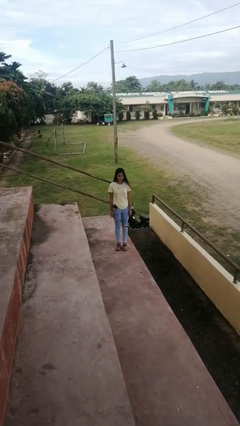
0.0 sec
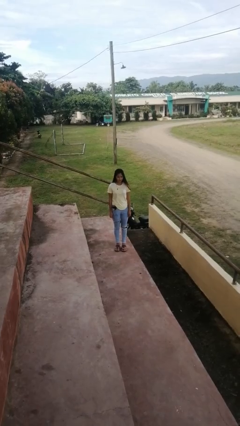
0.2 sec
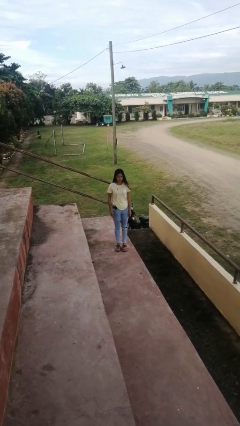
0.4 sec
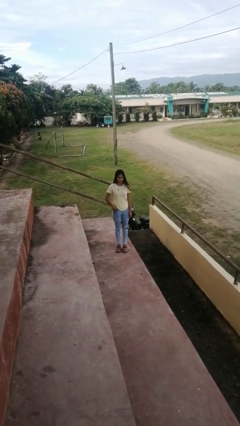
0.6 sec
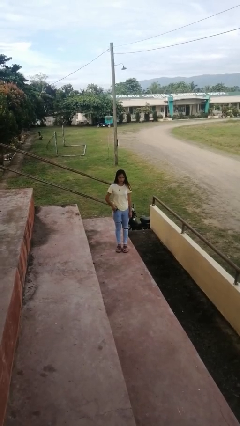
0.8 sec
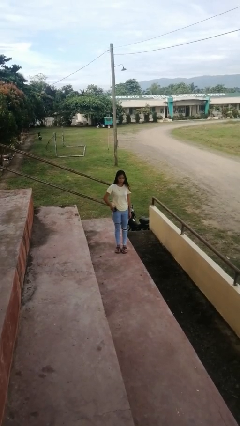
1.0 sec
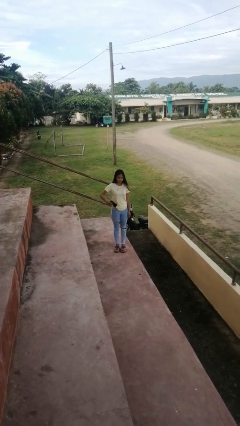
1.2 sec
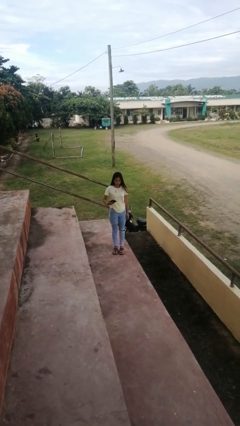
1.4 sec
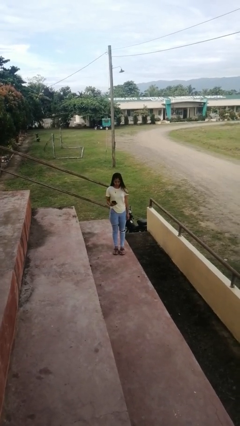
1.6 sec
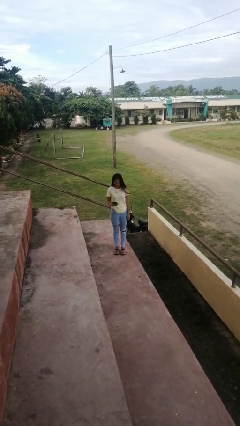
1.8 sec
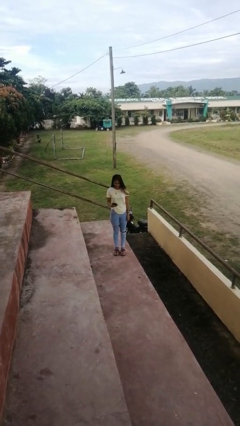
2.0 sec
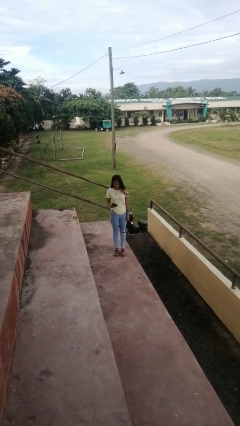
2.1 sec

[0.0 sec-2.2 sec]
person takes phone from pocket

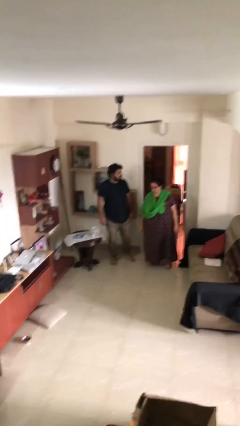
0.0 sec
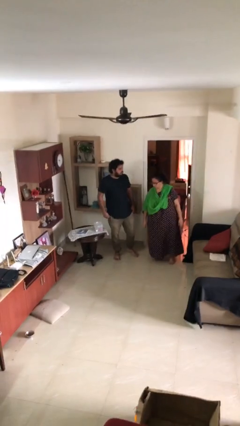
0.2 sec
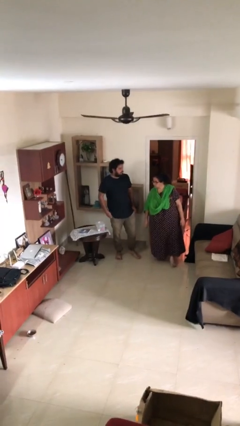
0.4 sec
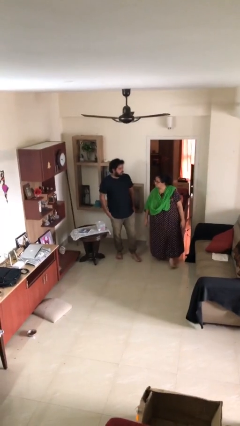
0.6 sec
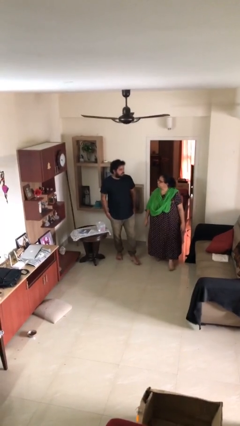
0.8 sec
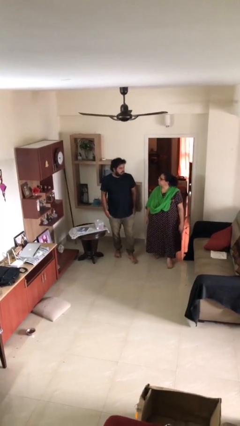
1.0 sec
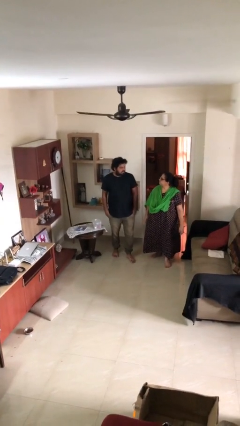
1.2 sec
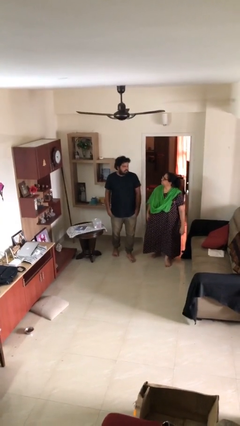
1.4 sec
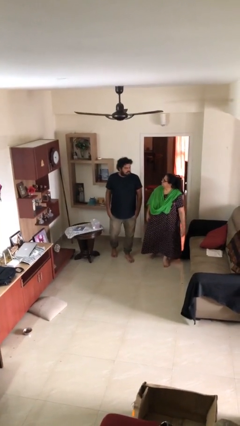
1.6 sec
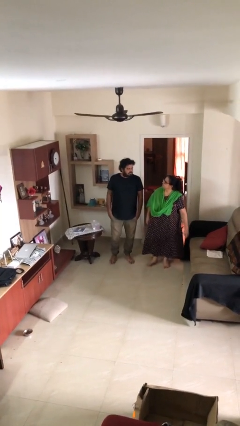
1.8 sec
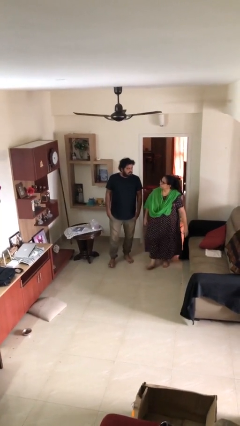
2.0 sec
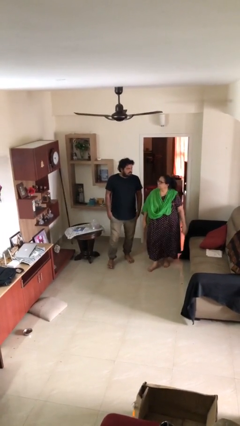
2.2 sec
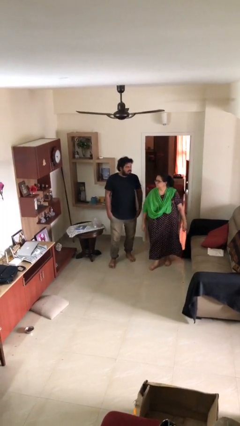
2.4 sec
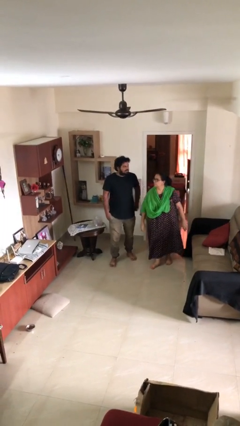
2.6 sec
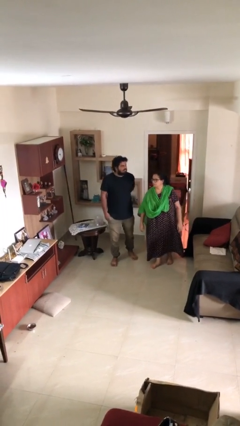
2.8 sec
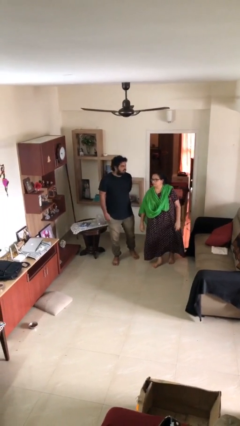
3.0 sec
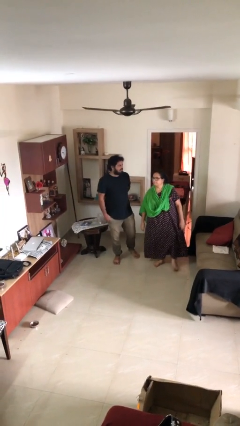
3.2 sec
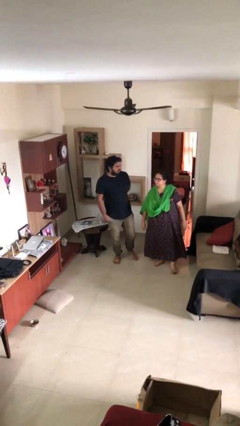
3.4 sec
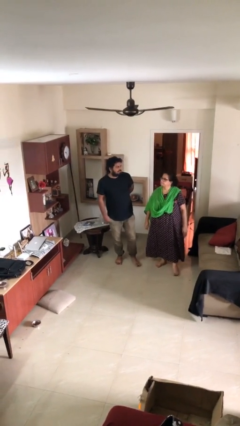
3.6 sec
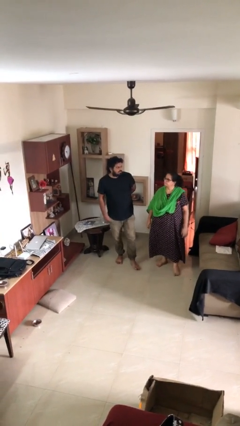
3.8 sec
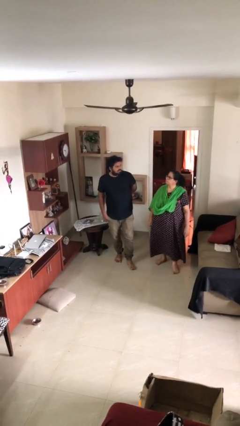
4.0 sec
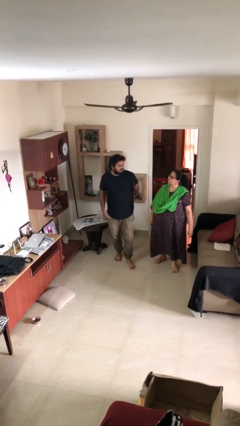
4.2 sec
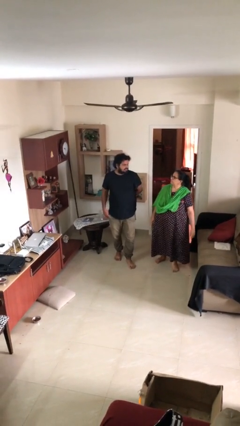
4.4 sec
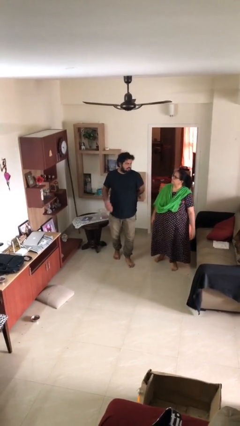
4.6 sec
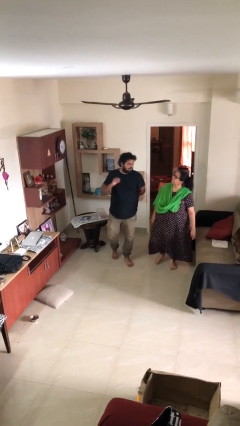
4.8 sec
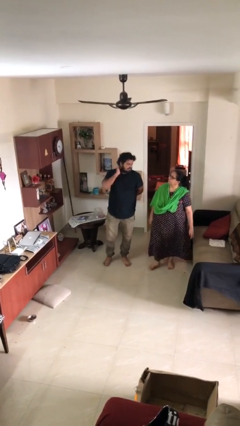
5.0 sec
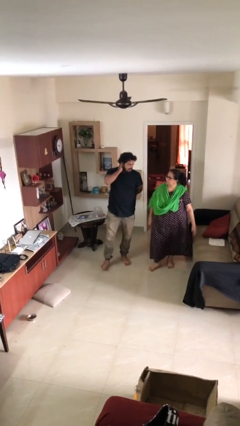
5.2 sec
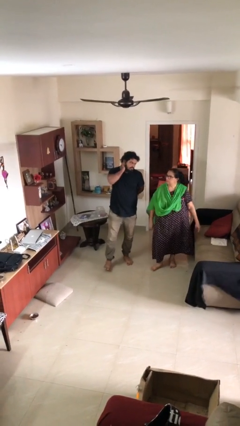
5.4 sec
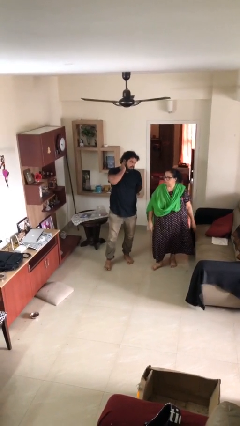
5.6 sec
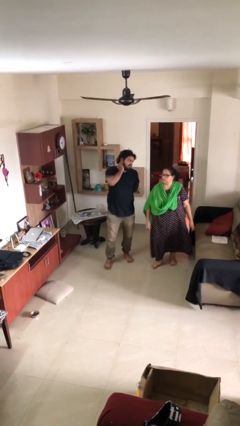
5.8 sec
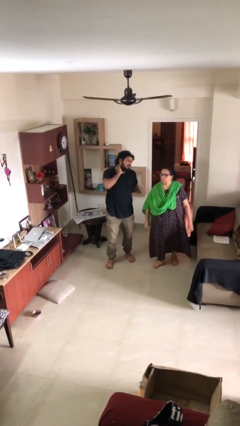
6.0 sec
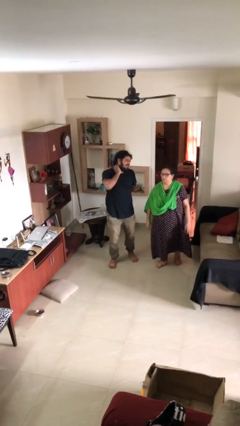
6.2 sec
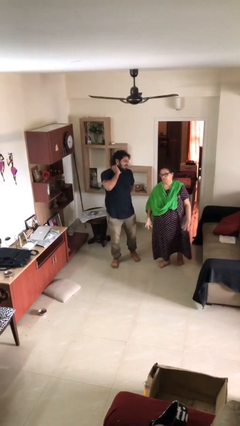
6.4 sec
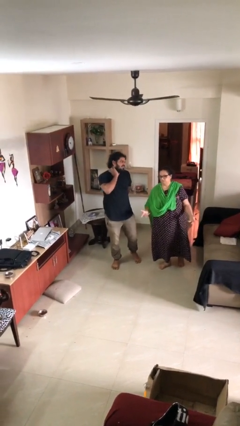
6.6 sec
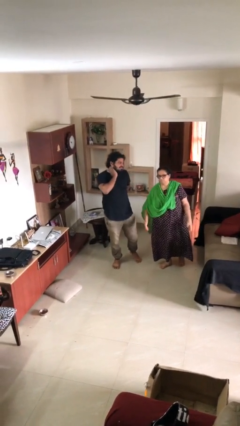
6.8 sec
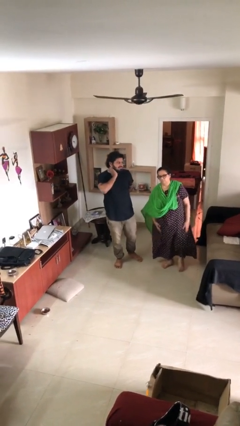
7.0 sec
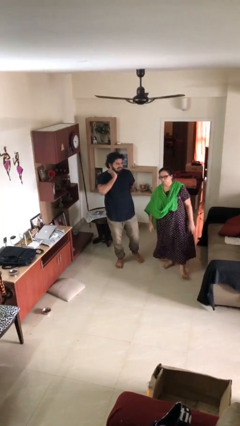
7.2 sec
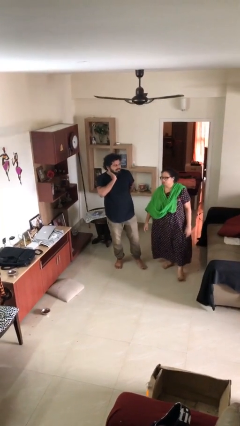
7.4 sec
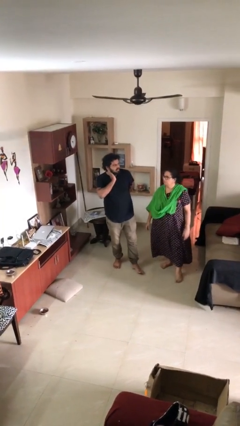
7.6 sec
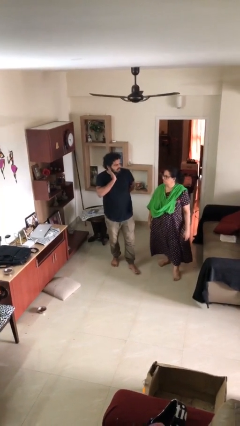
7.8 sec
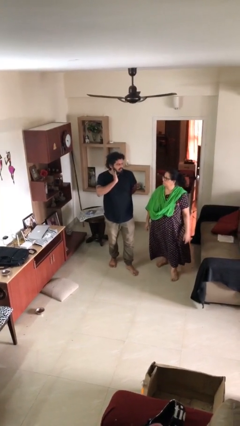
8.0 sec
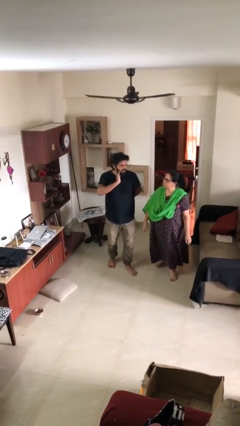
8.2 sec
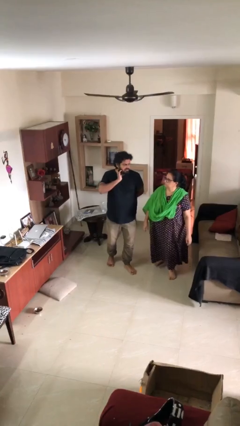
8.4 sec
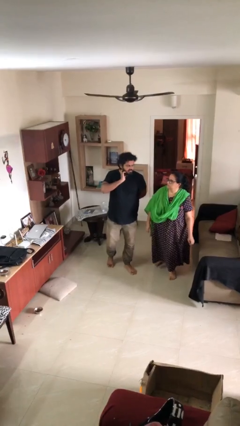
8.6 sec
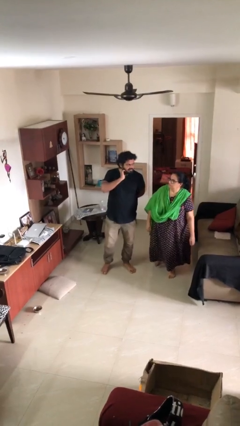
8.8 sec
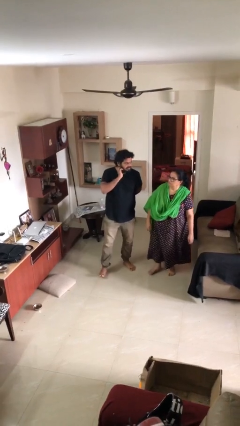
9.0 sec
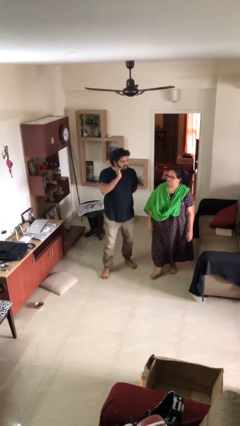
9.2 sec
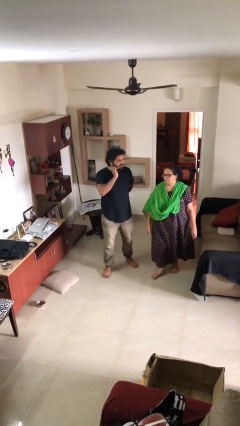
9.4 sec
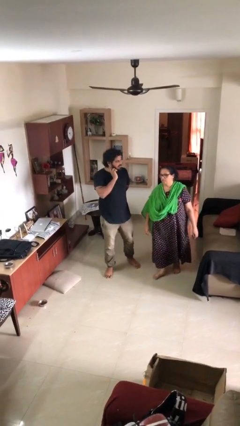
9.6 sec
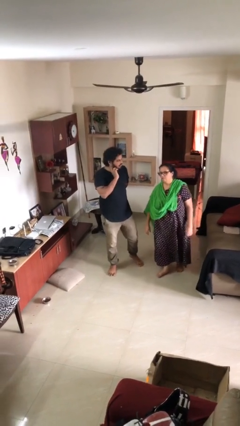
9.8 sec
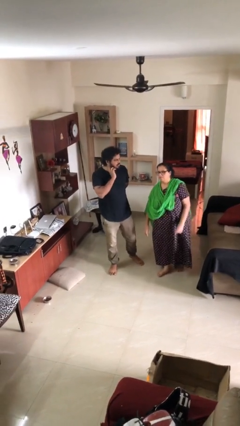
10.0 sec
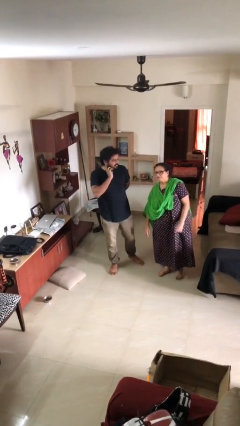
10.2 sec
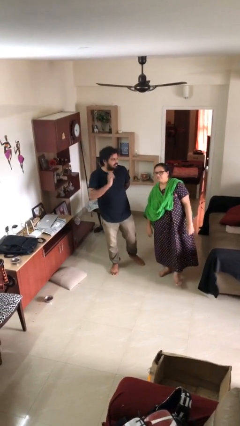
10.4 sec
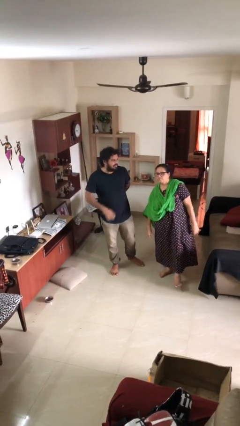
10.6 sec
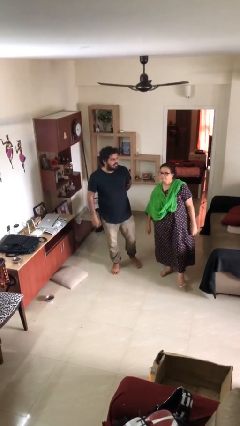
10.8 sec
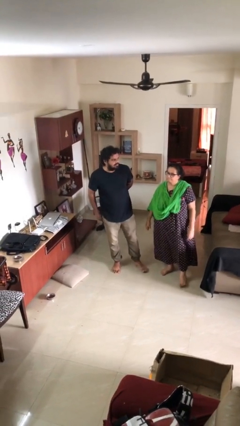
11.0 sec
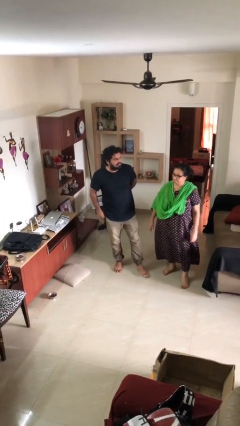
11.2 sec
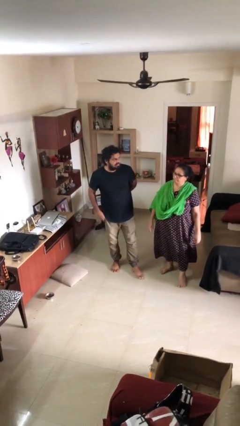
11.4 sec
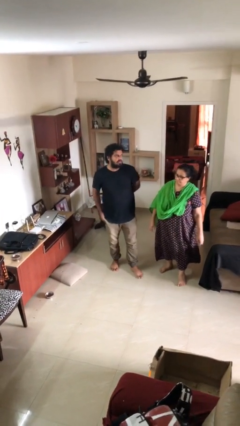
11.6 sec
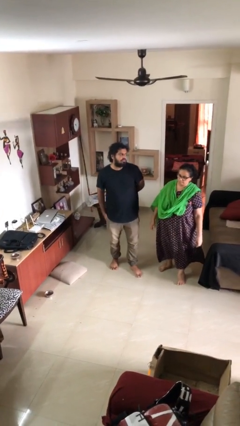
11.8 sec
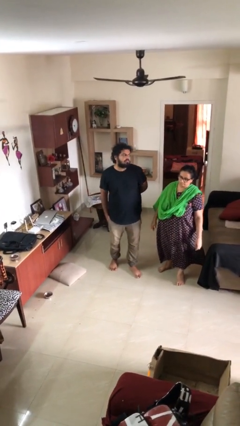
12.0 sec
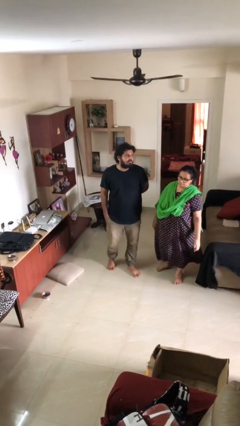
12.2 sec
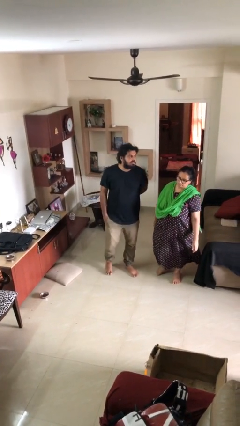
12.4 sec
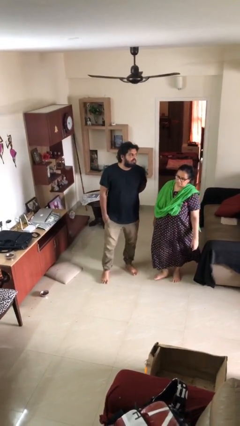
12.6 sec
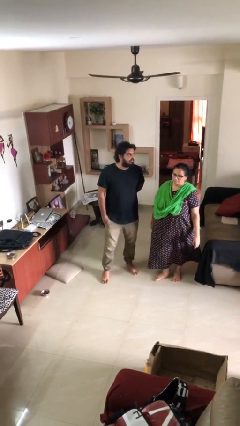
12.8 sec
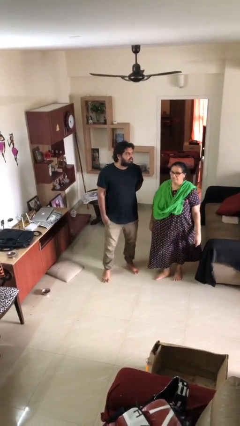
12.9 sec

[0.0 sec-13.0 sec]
person talks to person

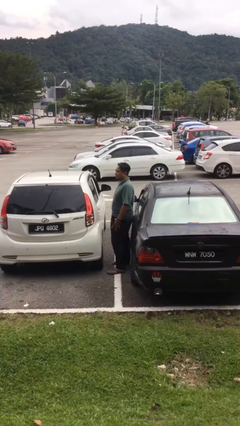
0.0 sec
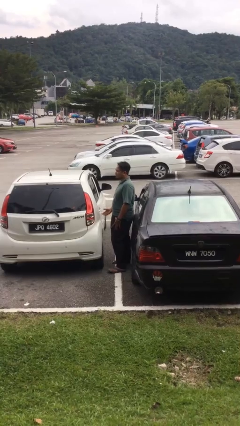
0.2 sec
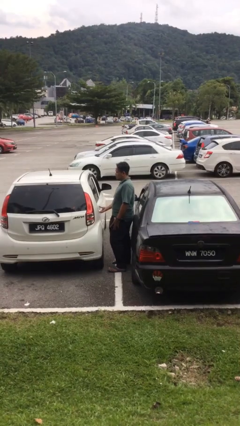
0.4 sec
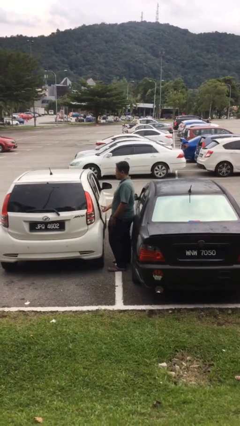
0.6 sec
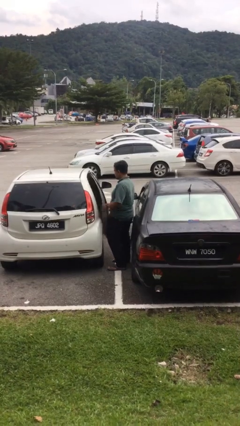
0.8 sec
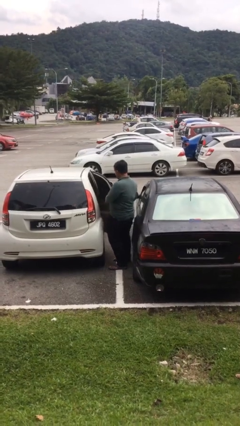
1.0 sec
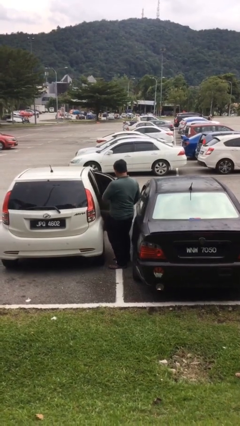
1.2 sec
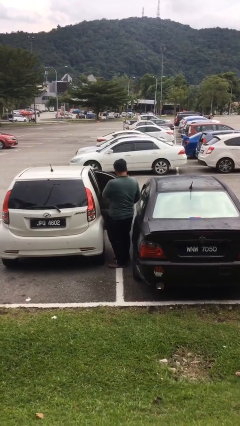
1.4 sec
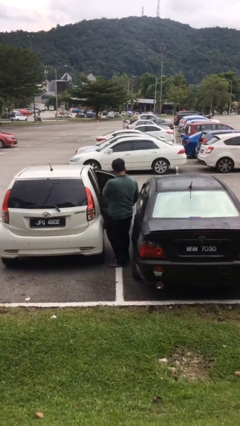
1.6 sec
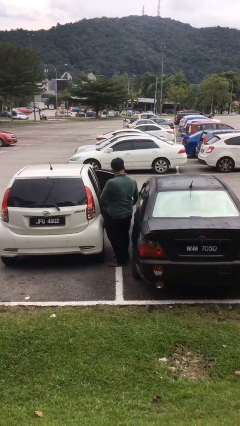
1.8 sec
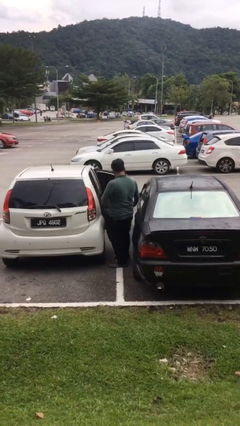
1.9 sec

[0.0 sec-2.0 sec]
person opens car door

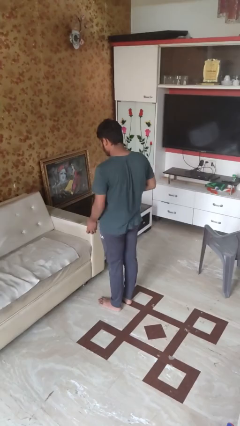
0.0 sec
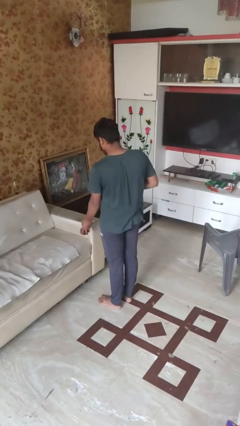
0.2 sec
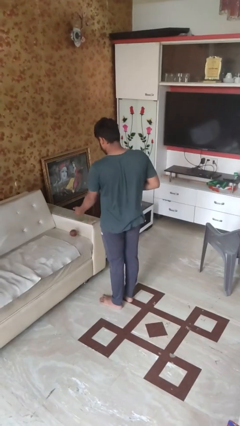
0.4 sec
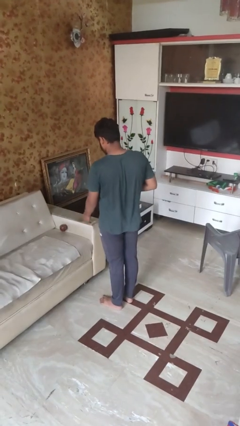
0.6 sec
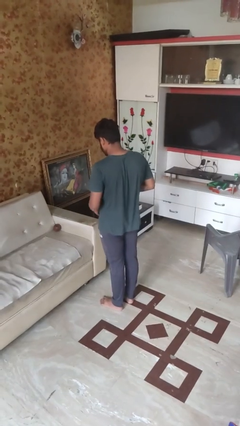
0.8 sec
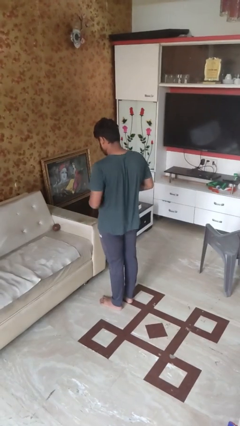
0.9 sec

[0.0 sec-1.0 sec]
person throws object on bed
